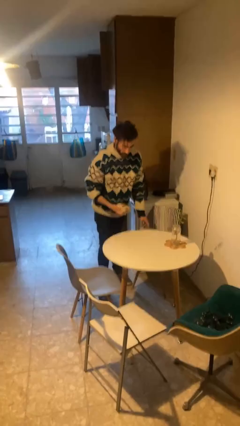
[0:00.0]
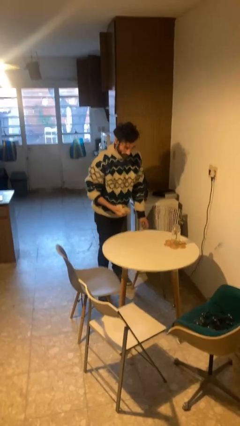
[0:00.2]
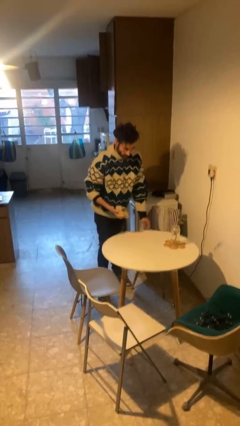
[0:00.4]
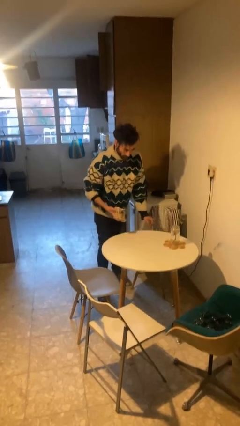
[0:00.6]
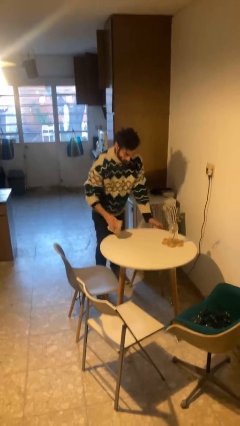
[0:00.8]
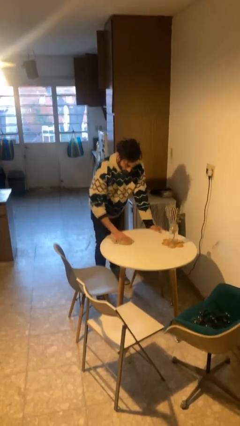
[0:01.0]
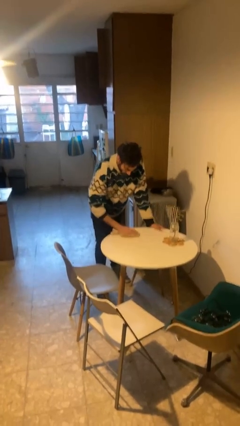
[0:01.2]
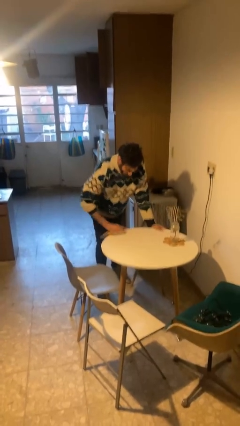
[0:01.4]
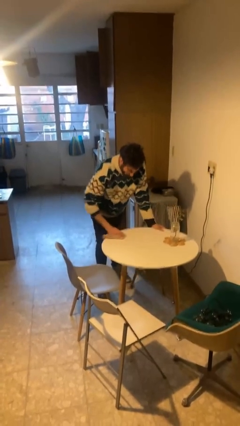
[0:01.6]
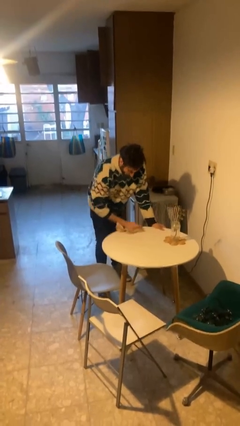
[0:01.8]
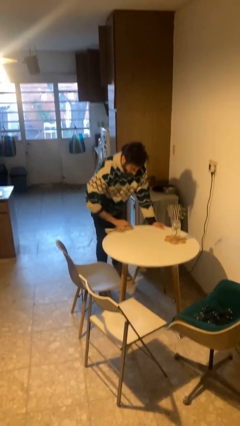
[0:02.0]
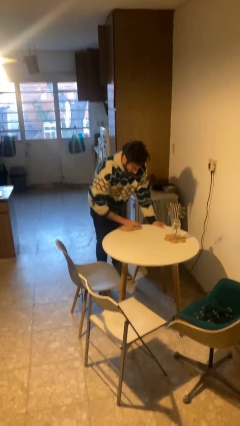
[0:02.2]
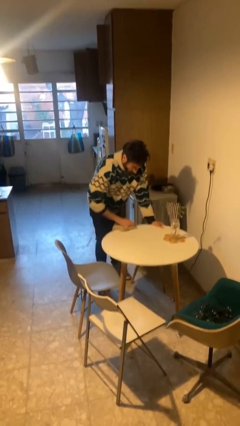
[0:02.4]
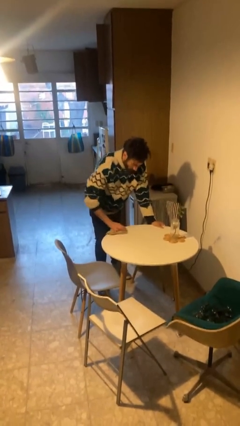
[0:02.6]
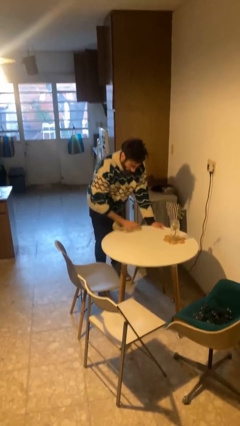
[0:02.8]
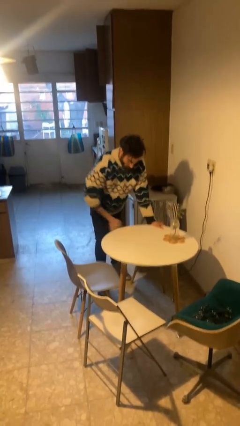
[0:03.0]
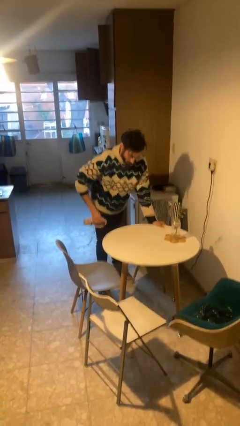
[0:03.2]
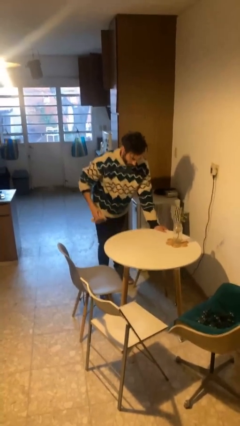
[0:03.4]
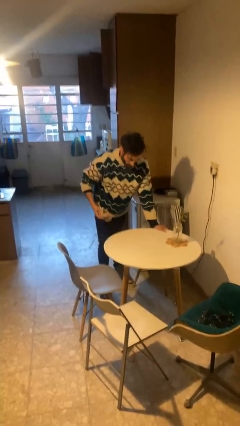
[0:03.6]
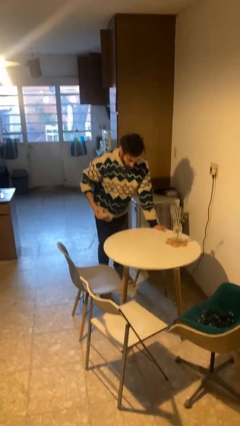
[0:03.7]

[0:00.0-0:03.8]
person cleans table with rag

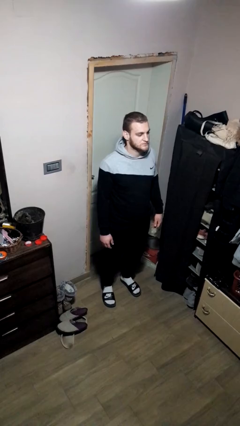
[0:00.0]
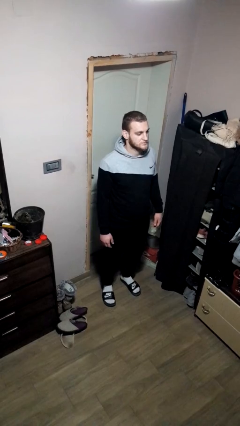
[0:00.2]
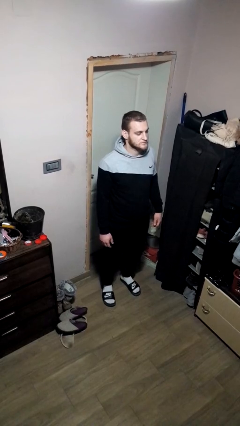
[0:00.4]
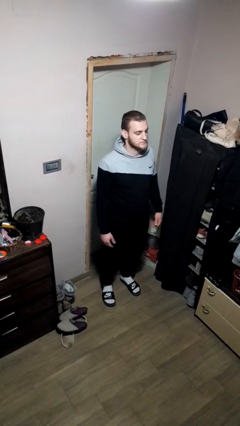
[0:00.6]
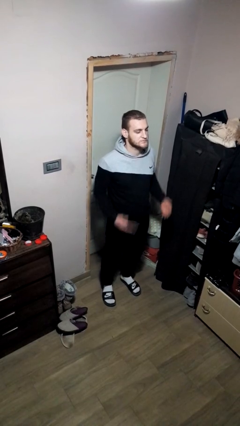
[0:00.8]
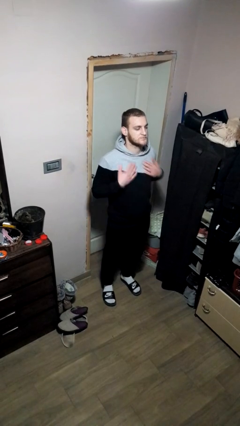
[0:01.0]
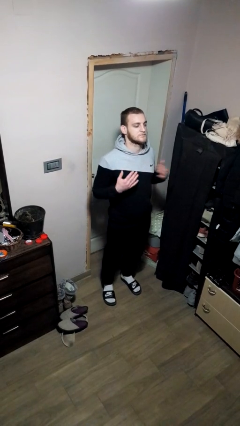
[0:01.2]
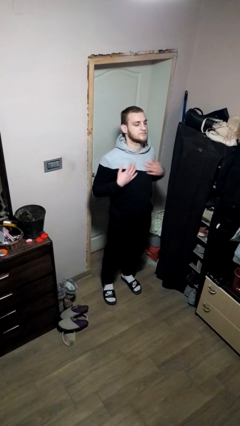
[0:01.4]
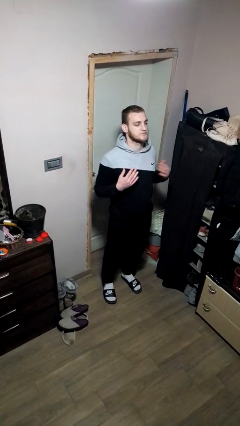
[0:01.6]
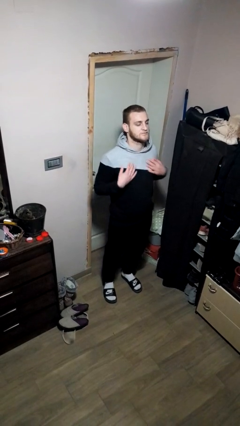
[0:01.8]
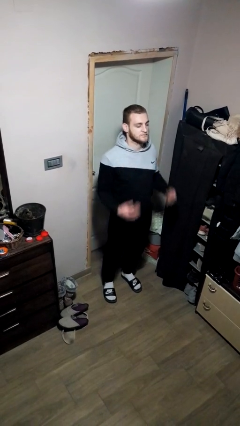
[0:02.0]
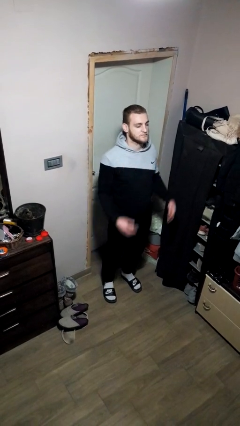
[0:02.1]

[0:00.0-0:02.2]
person drums on chest

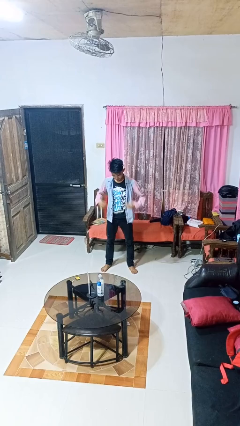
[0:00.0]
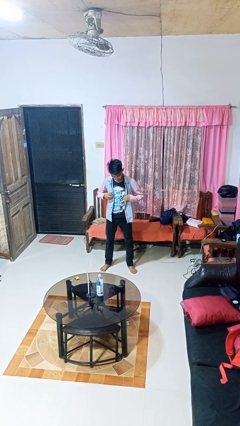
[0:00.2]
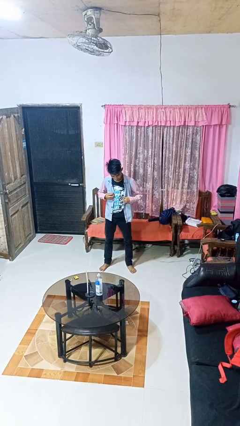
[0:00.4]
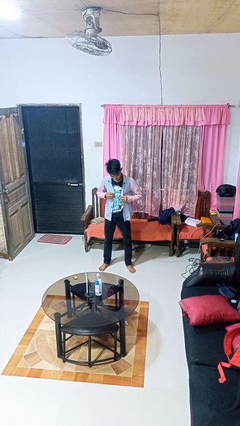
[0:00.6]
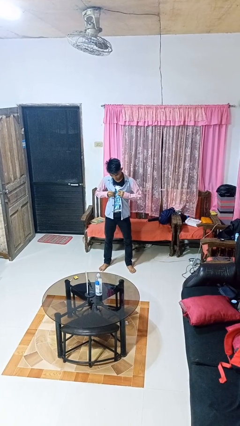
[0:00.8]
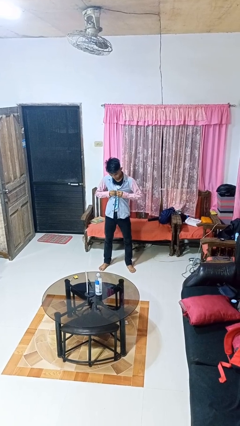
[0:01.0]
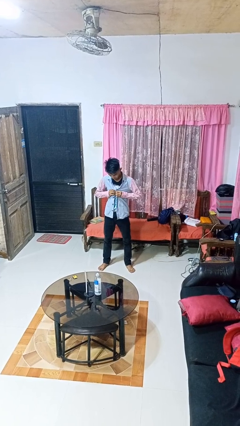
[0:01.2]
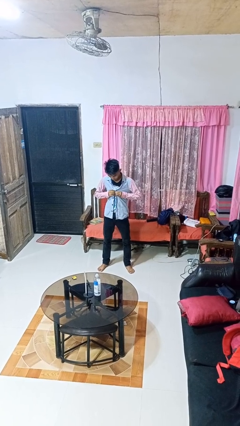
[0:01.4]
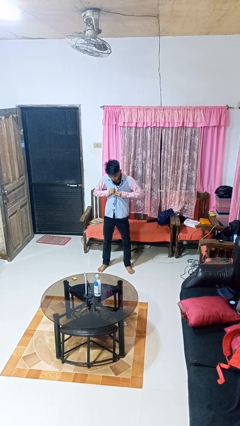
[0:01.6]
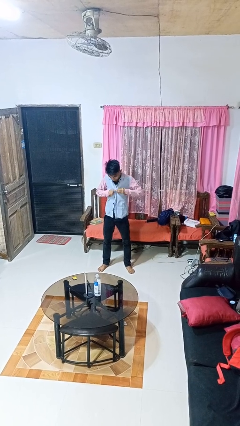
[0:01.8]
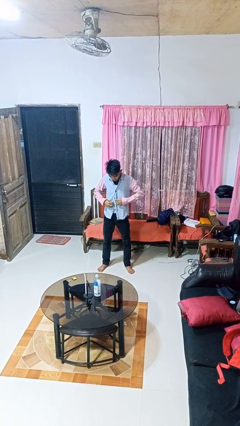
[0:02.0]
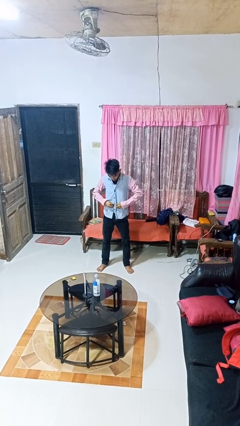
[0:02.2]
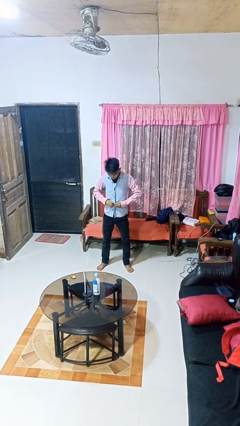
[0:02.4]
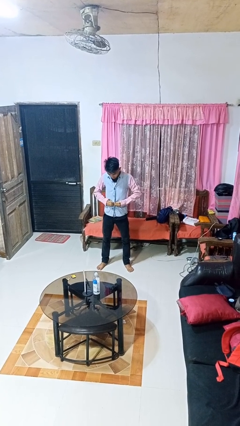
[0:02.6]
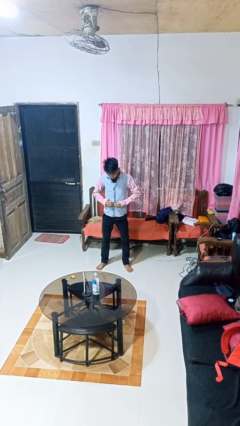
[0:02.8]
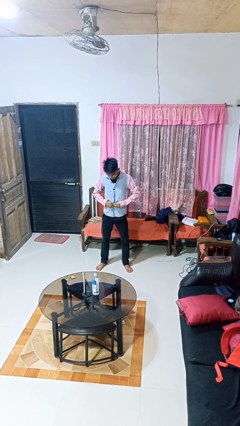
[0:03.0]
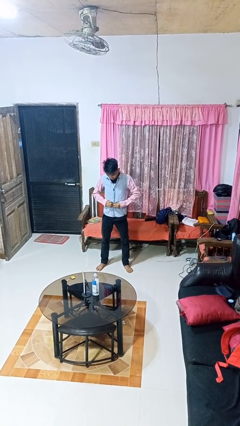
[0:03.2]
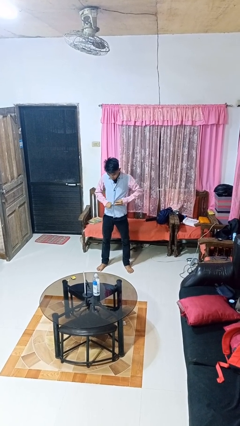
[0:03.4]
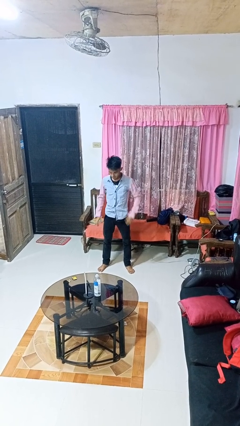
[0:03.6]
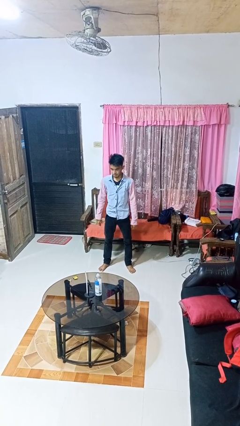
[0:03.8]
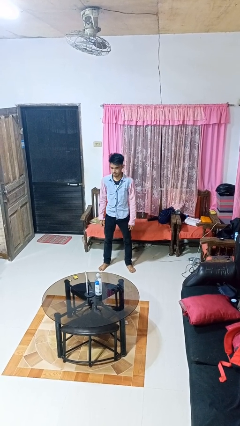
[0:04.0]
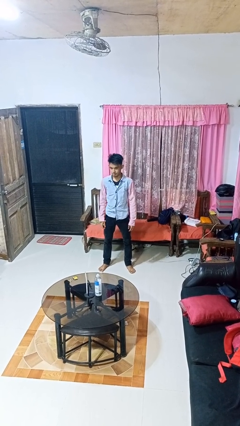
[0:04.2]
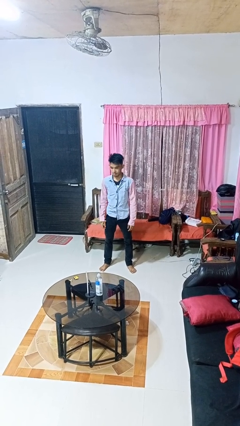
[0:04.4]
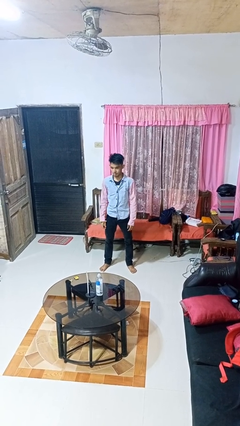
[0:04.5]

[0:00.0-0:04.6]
person buttons shirt

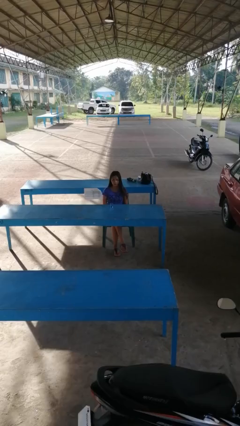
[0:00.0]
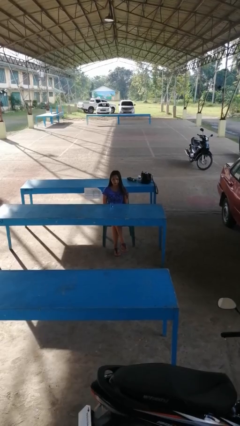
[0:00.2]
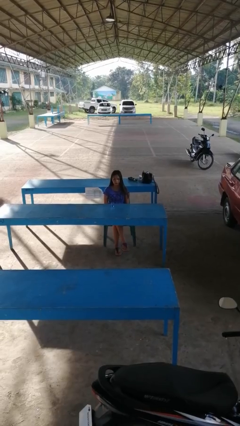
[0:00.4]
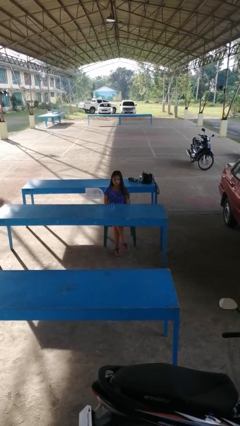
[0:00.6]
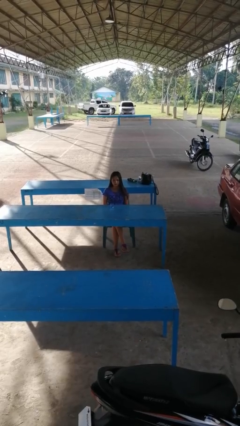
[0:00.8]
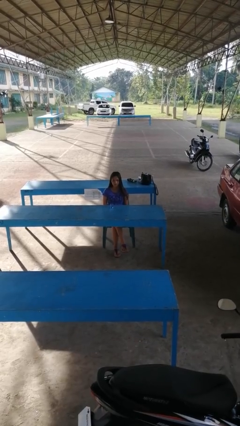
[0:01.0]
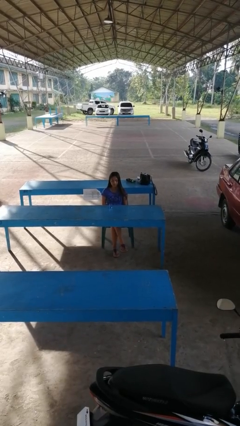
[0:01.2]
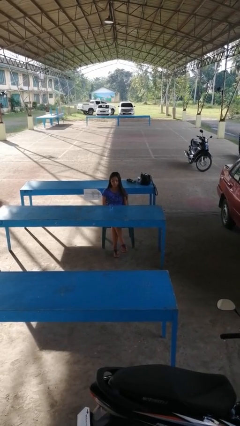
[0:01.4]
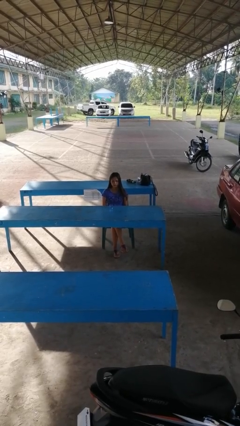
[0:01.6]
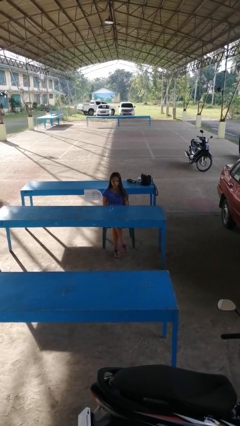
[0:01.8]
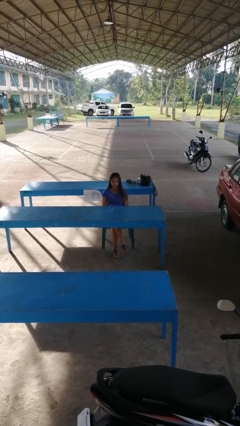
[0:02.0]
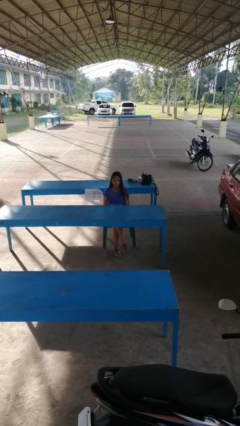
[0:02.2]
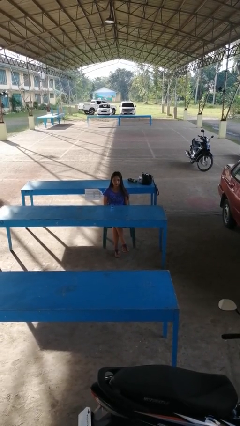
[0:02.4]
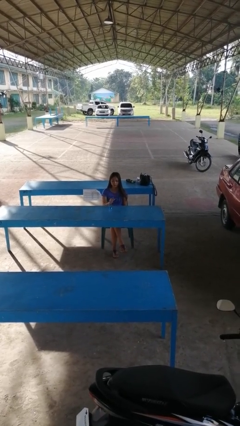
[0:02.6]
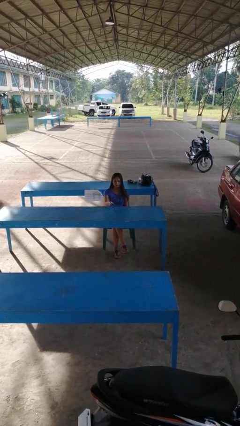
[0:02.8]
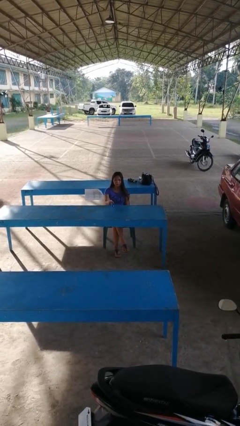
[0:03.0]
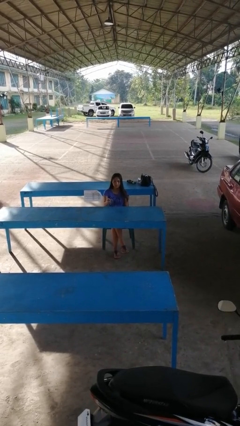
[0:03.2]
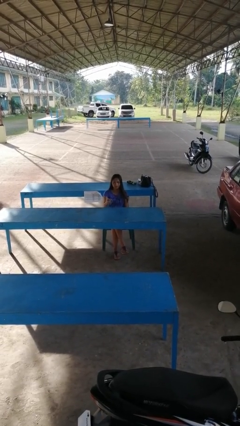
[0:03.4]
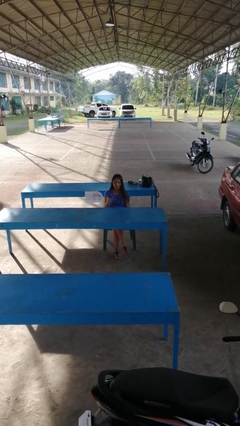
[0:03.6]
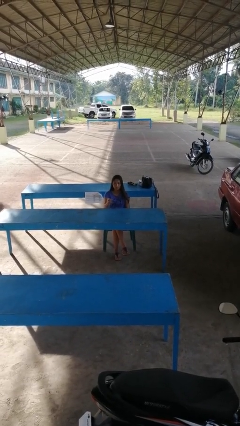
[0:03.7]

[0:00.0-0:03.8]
person picks up object from table

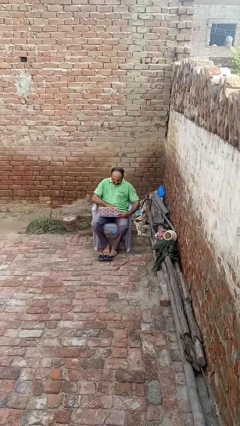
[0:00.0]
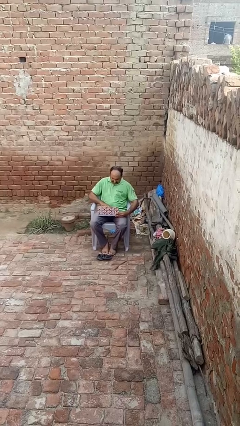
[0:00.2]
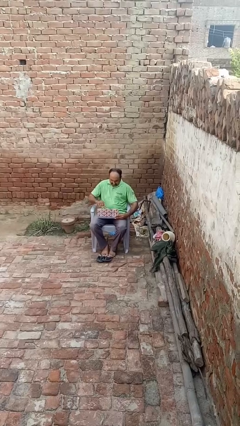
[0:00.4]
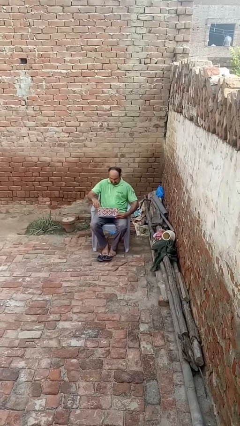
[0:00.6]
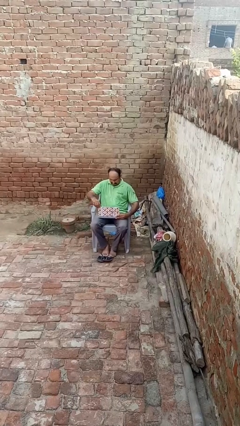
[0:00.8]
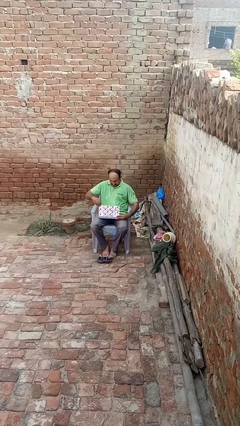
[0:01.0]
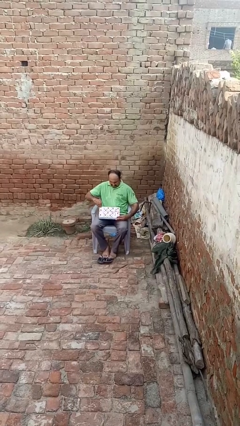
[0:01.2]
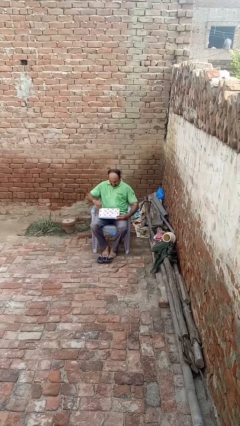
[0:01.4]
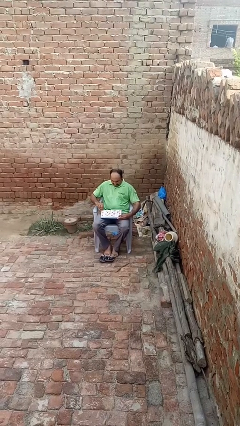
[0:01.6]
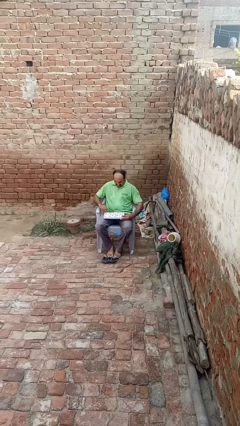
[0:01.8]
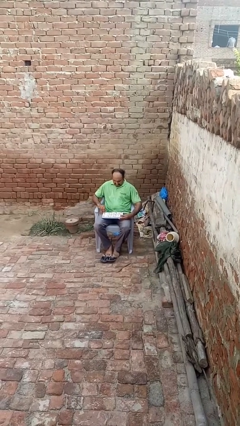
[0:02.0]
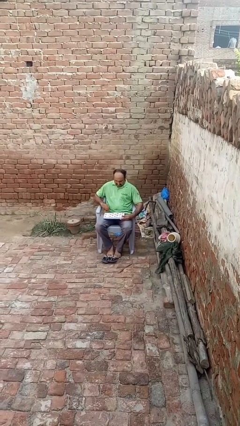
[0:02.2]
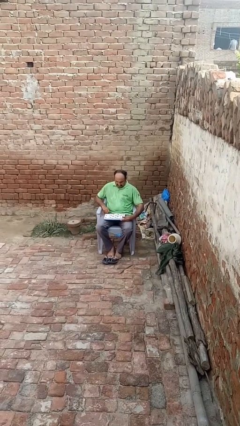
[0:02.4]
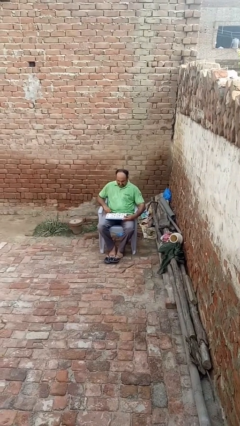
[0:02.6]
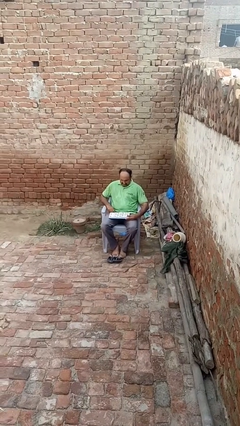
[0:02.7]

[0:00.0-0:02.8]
person closes laptop
